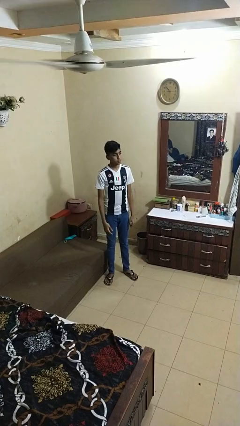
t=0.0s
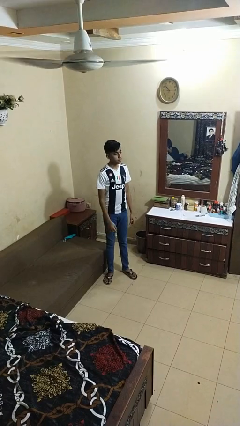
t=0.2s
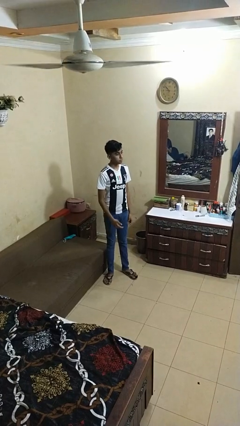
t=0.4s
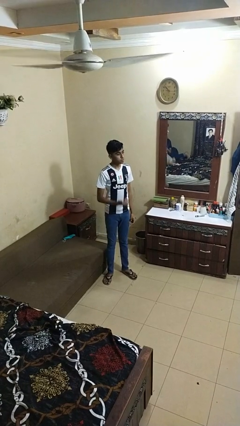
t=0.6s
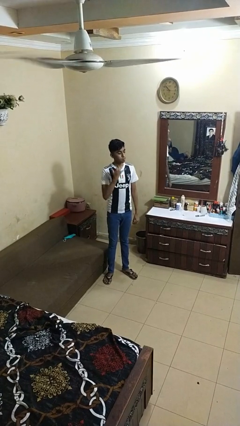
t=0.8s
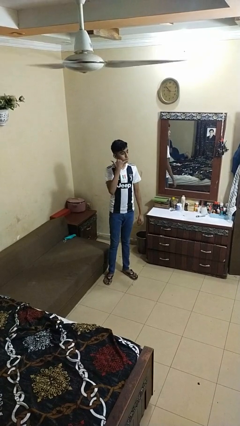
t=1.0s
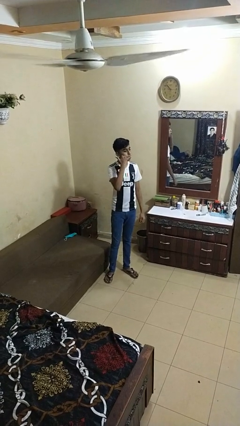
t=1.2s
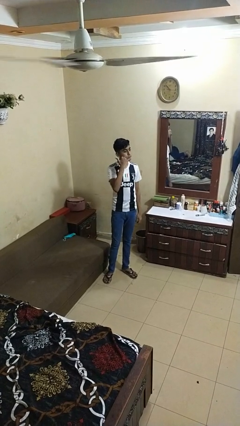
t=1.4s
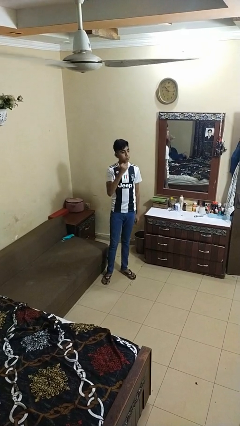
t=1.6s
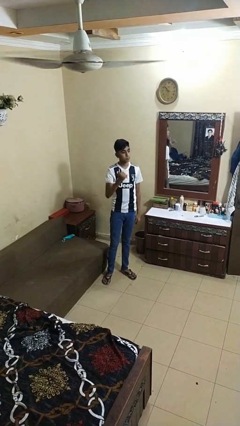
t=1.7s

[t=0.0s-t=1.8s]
person gestures call me

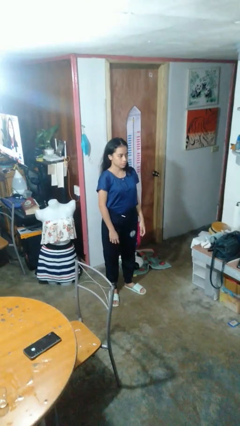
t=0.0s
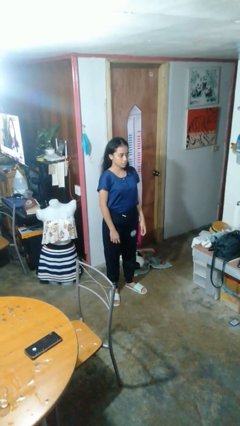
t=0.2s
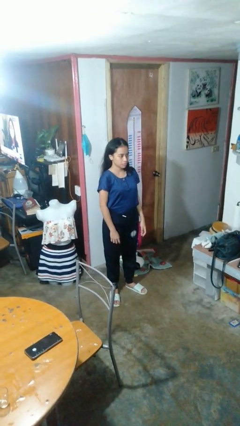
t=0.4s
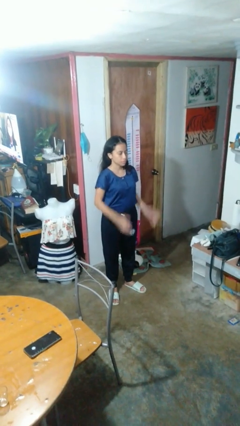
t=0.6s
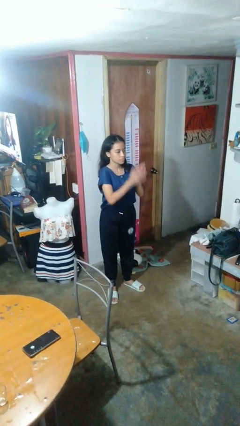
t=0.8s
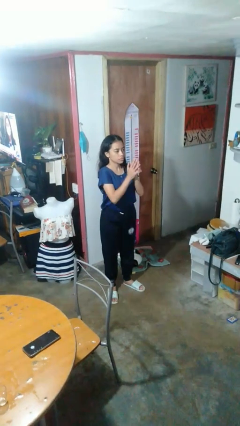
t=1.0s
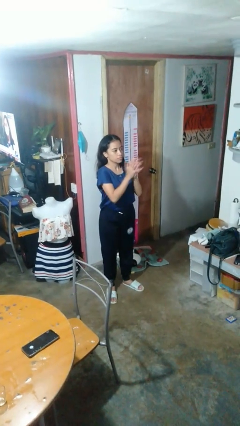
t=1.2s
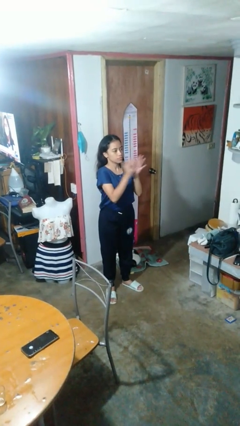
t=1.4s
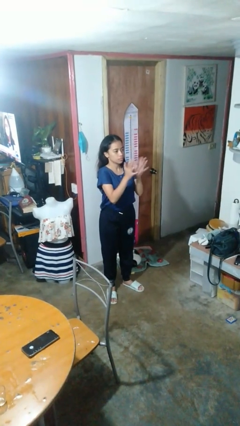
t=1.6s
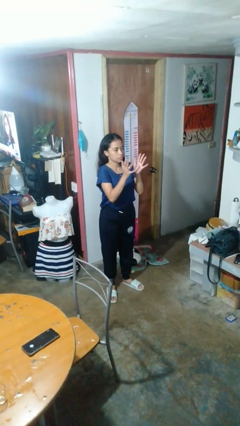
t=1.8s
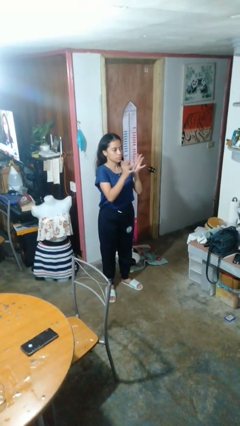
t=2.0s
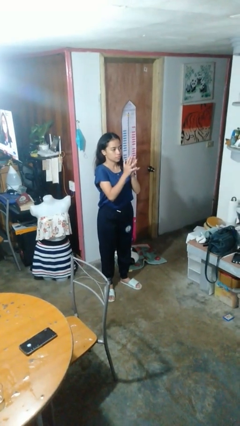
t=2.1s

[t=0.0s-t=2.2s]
person claps hands

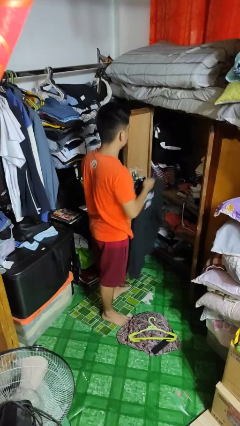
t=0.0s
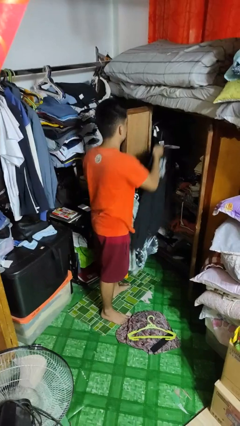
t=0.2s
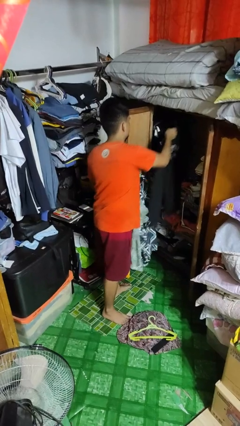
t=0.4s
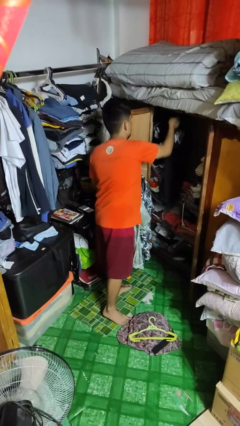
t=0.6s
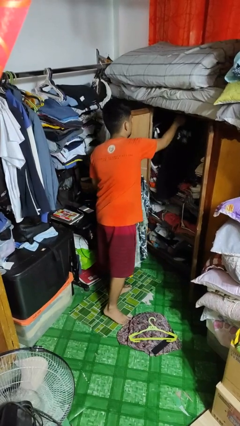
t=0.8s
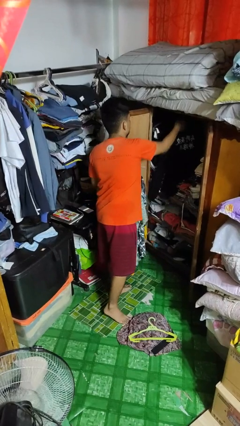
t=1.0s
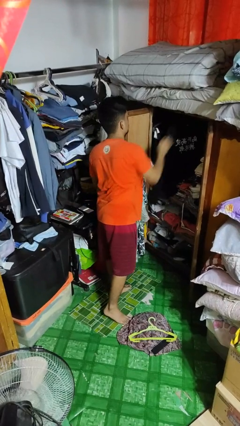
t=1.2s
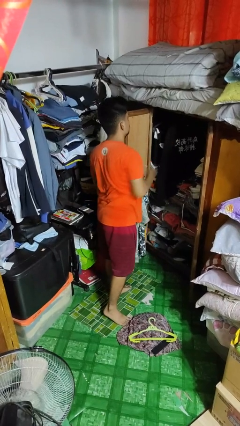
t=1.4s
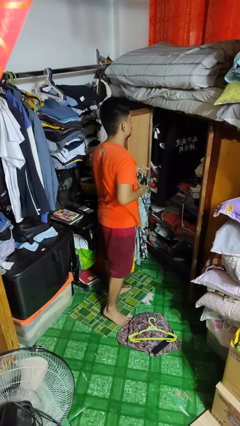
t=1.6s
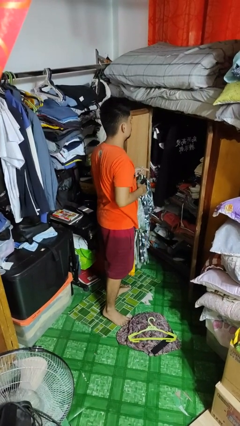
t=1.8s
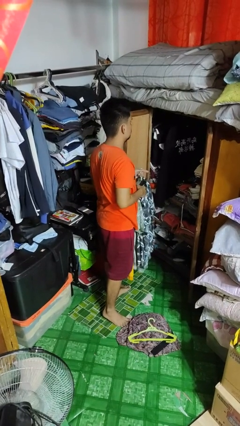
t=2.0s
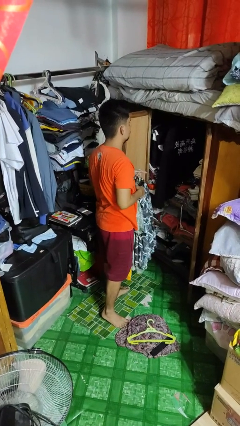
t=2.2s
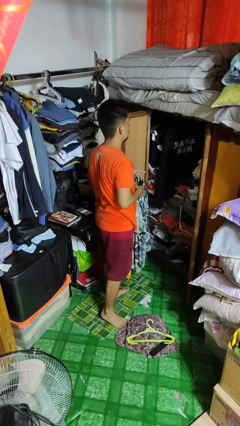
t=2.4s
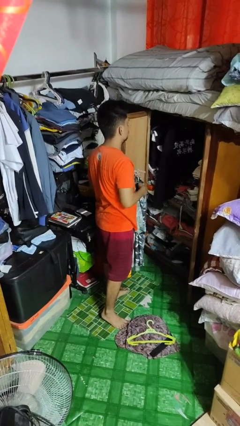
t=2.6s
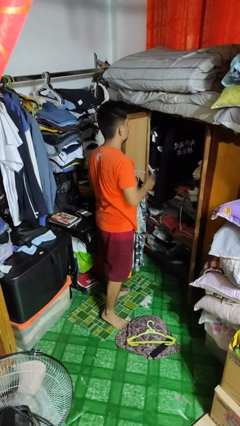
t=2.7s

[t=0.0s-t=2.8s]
person puts clothes into closet

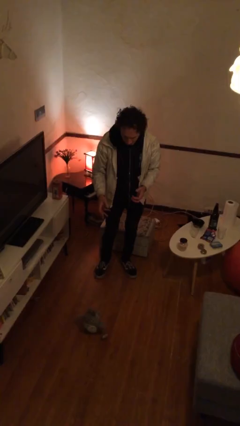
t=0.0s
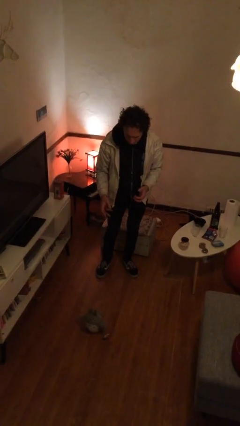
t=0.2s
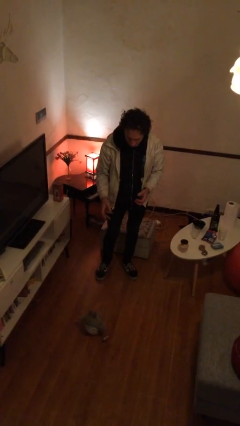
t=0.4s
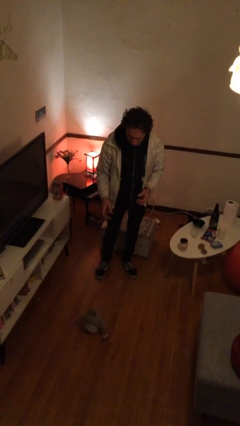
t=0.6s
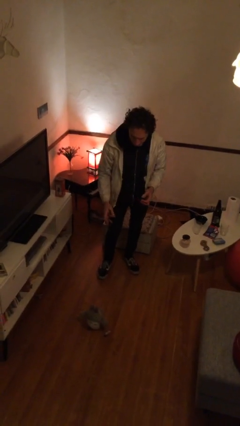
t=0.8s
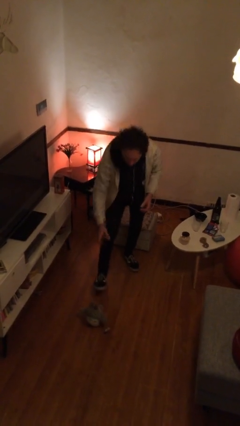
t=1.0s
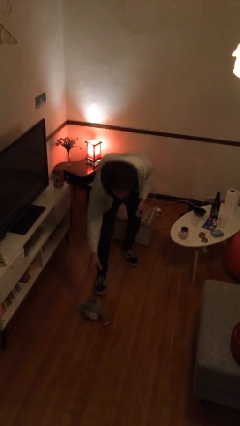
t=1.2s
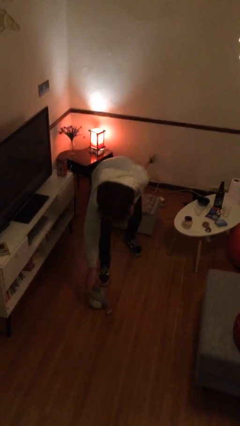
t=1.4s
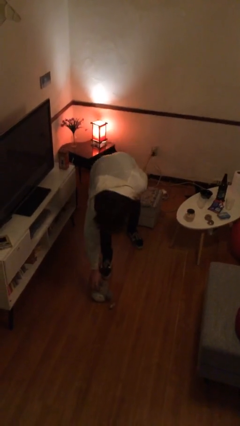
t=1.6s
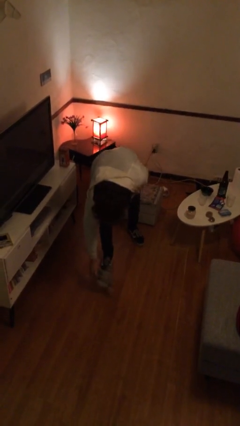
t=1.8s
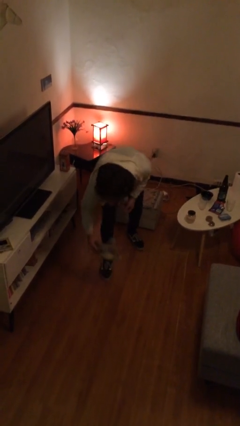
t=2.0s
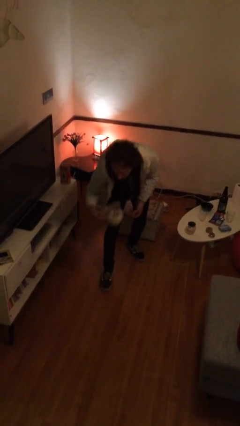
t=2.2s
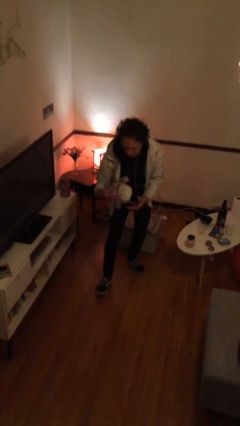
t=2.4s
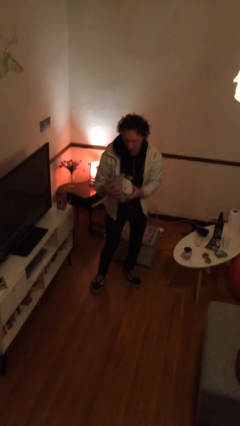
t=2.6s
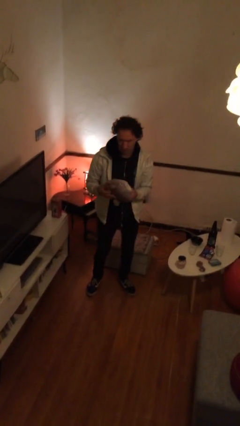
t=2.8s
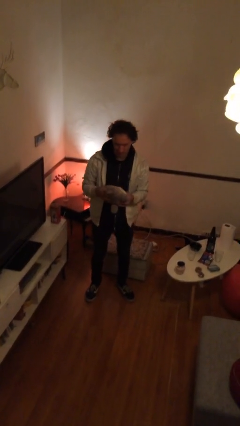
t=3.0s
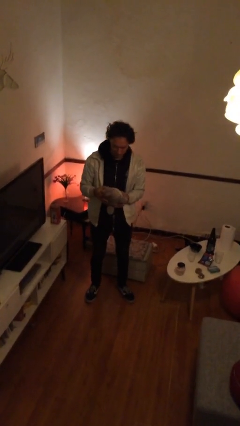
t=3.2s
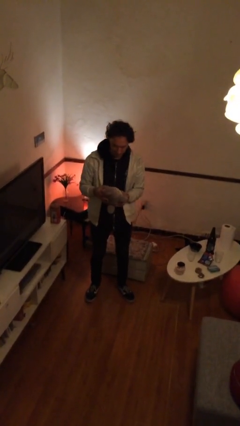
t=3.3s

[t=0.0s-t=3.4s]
person picks up object from floor

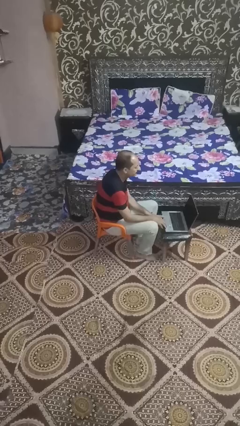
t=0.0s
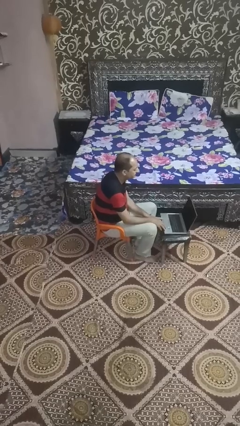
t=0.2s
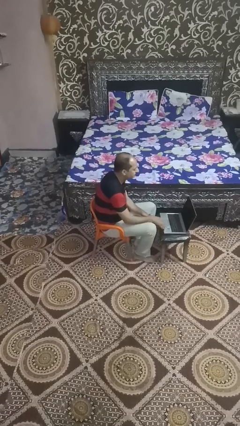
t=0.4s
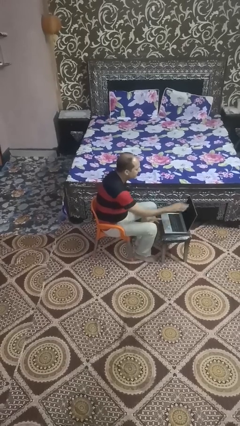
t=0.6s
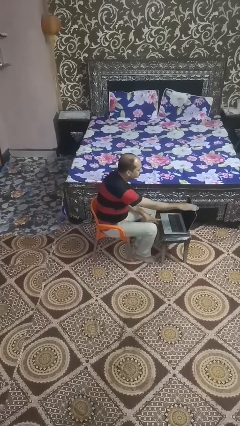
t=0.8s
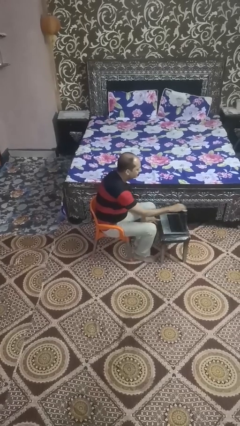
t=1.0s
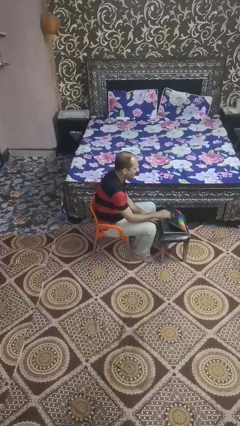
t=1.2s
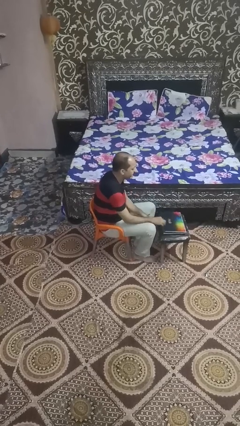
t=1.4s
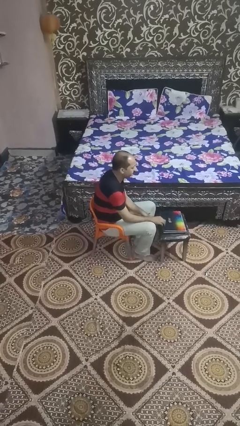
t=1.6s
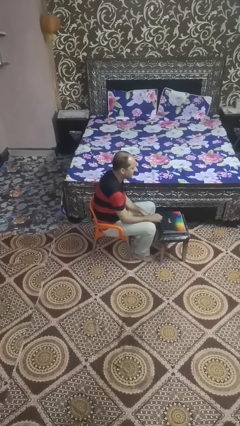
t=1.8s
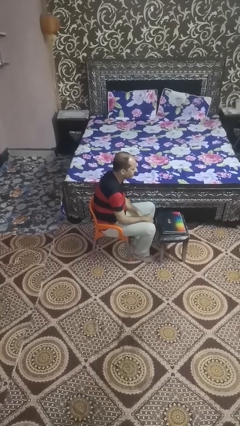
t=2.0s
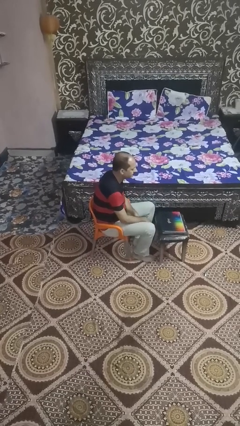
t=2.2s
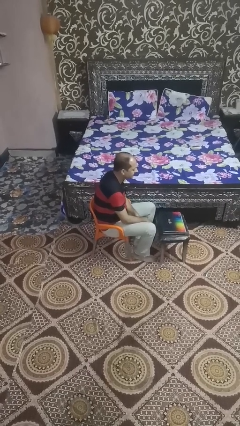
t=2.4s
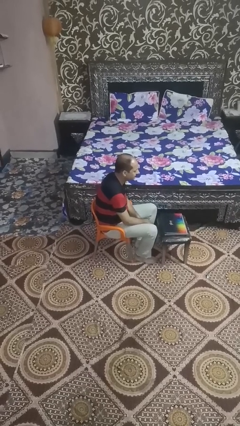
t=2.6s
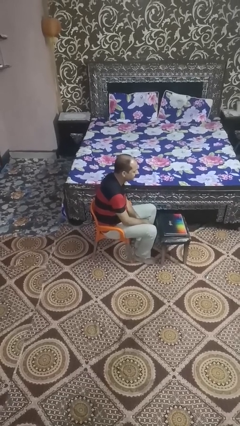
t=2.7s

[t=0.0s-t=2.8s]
person closes laptop

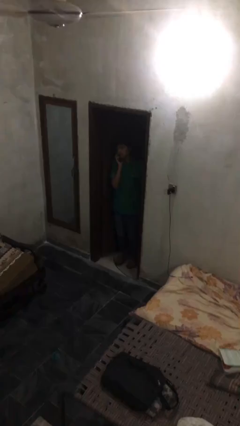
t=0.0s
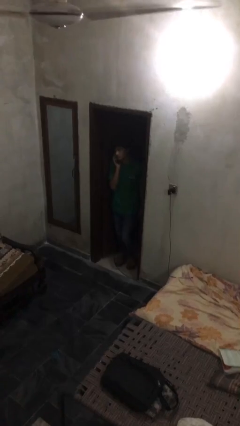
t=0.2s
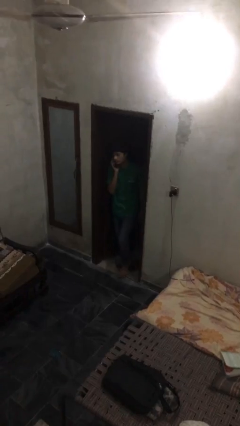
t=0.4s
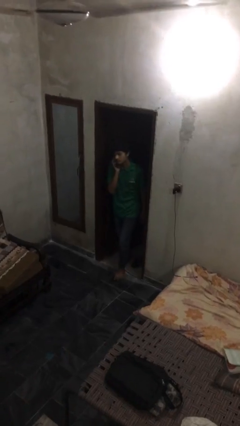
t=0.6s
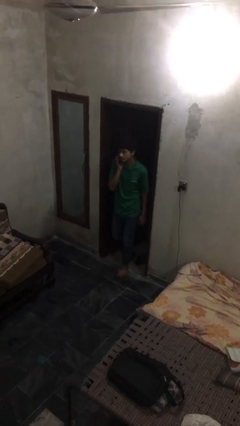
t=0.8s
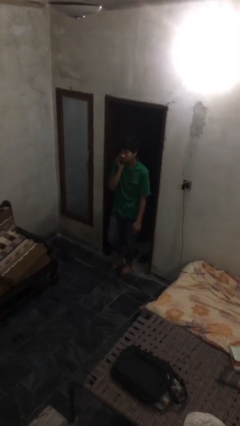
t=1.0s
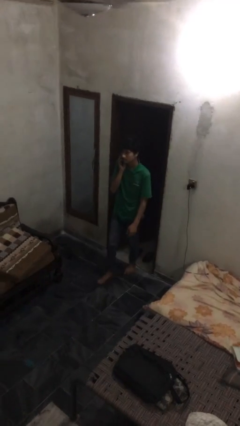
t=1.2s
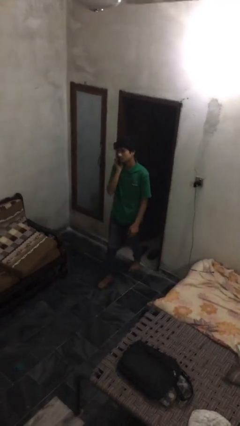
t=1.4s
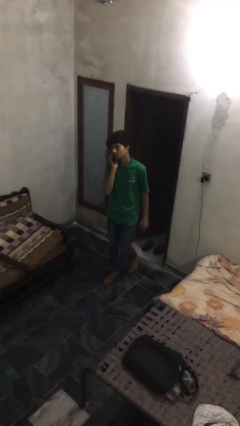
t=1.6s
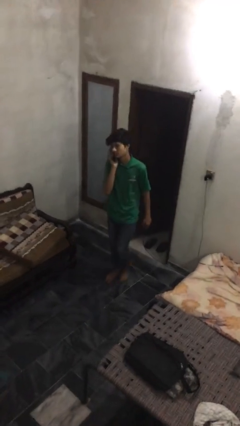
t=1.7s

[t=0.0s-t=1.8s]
person enters scene through structure

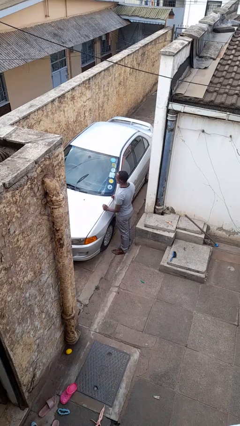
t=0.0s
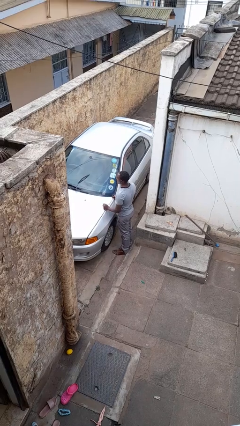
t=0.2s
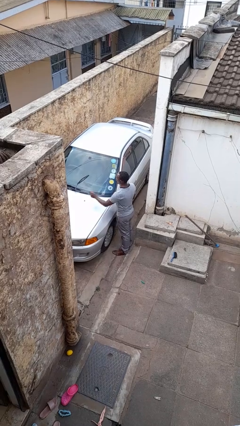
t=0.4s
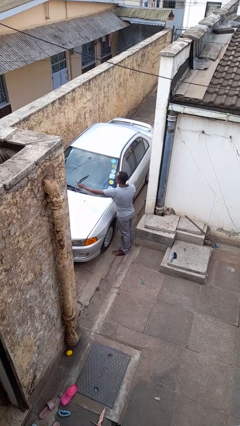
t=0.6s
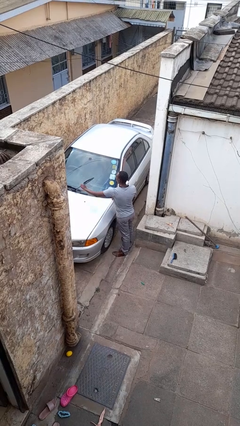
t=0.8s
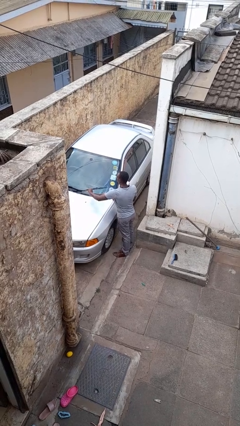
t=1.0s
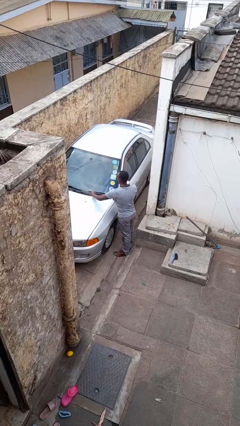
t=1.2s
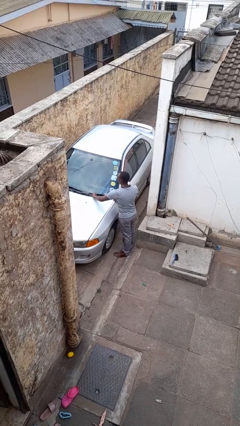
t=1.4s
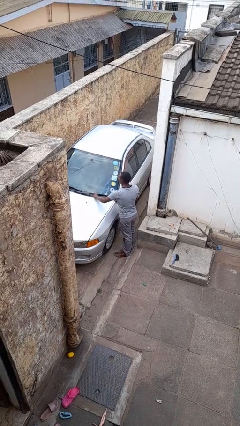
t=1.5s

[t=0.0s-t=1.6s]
person flips down car wipers
